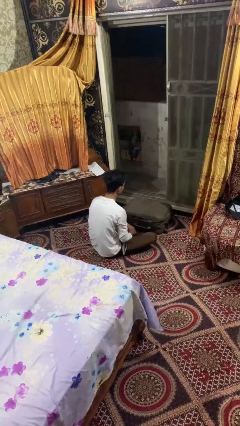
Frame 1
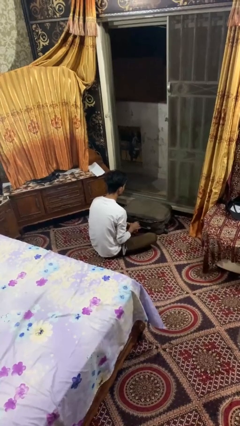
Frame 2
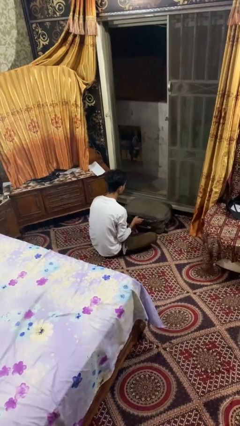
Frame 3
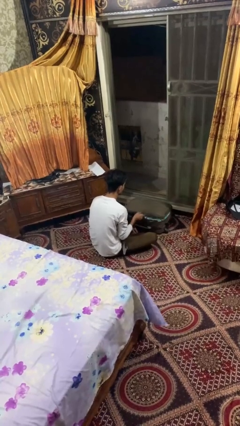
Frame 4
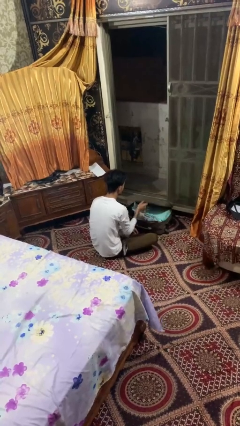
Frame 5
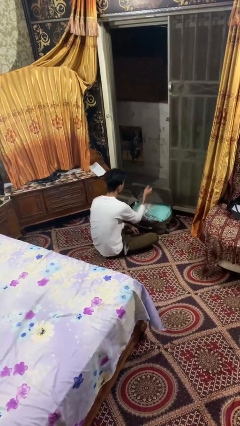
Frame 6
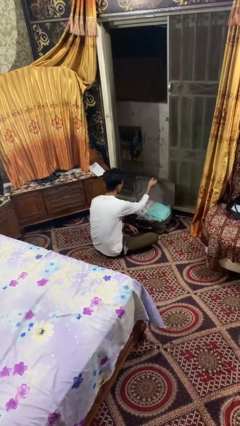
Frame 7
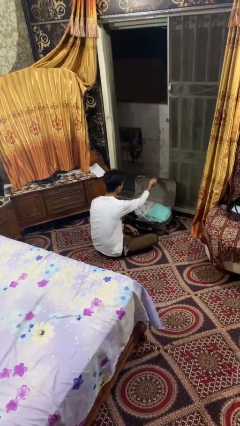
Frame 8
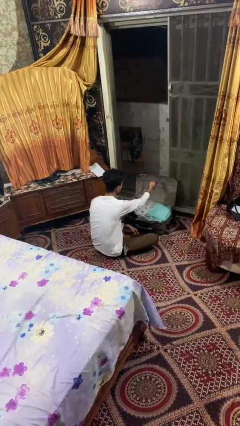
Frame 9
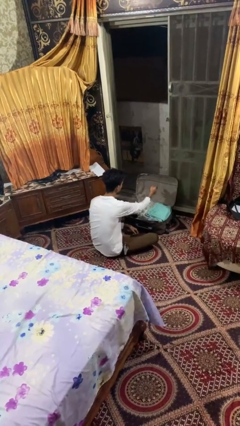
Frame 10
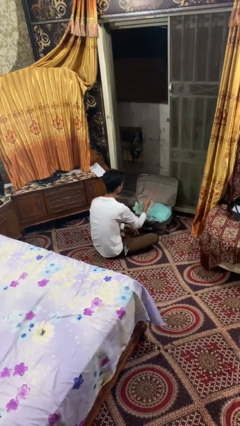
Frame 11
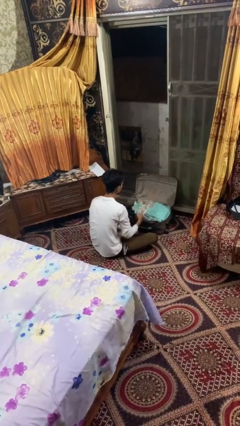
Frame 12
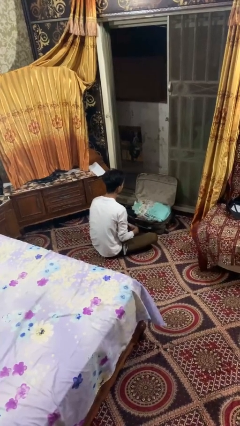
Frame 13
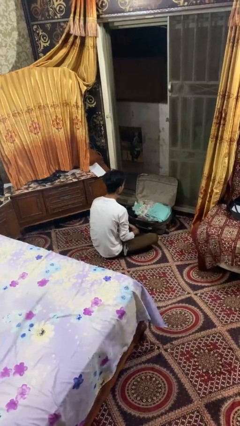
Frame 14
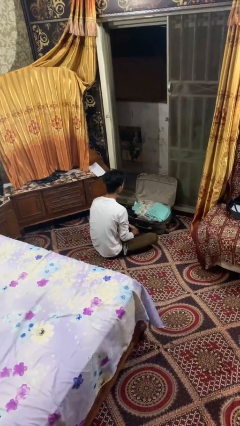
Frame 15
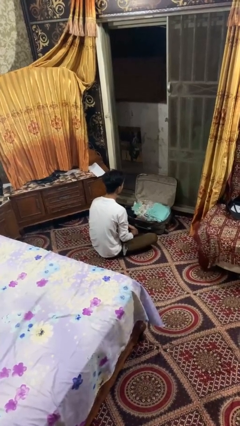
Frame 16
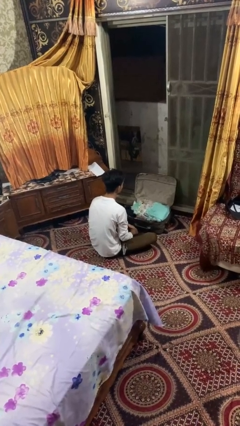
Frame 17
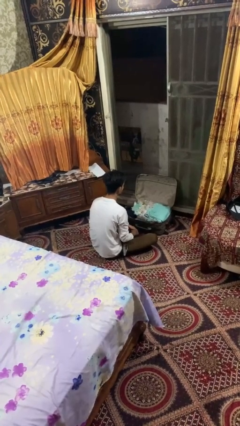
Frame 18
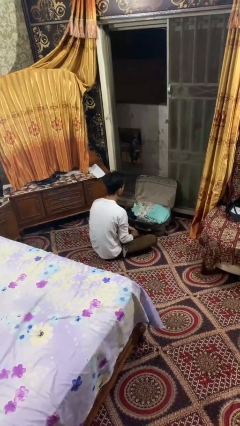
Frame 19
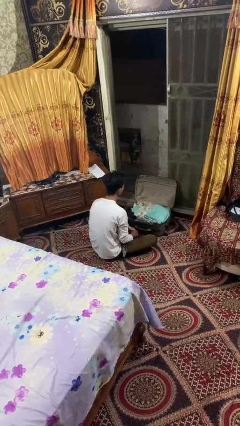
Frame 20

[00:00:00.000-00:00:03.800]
person opens suitcase

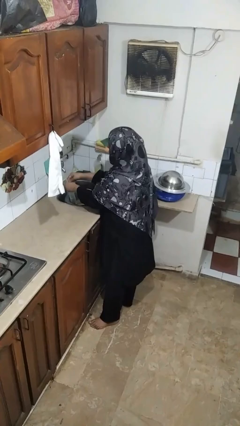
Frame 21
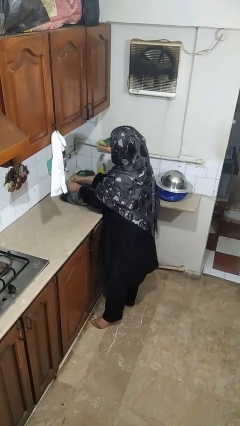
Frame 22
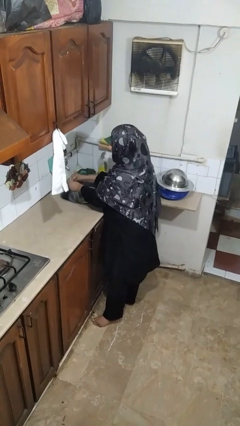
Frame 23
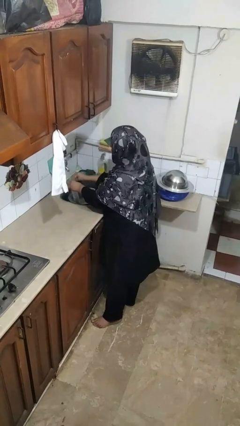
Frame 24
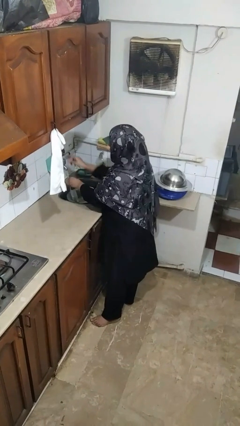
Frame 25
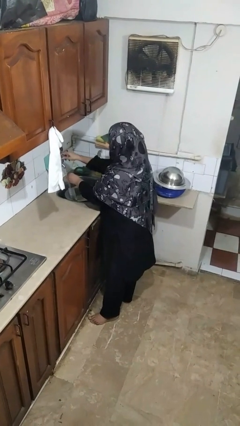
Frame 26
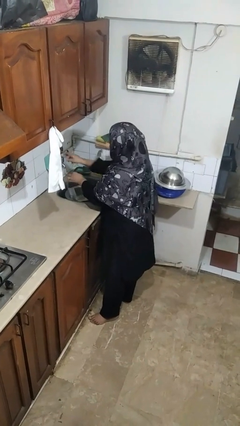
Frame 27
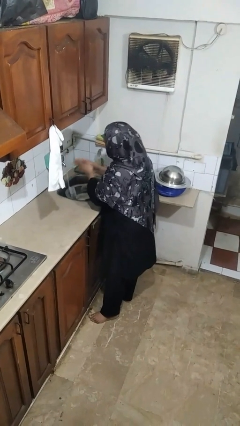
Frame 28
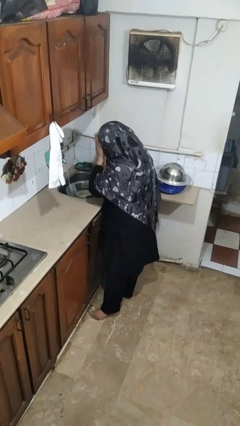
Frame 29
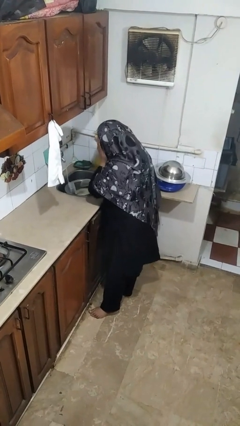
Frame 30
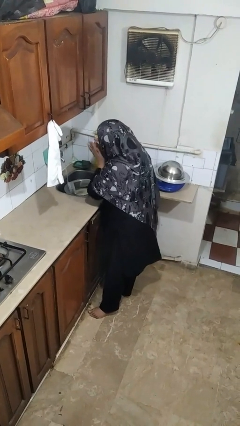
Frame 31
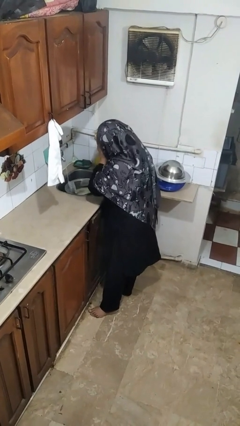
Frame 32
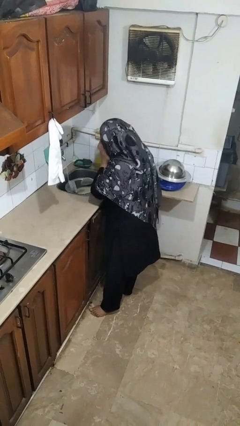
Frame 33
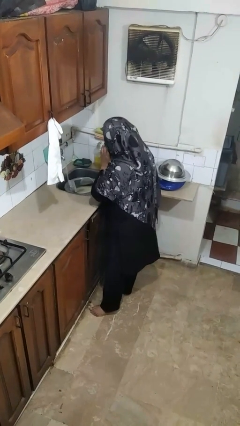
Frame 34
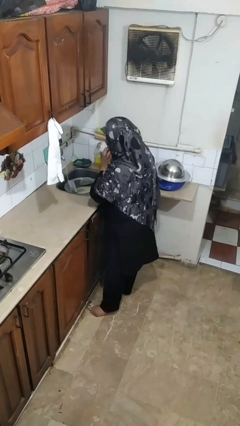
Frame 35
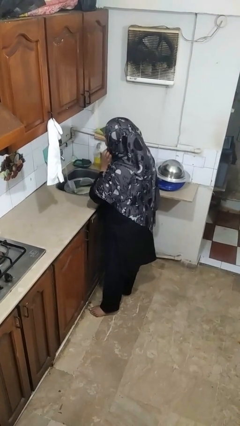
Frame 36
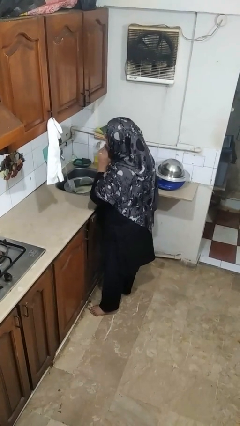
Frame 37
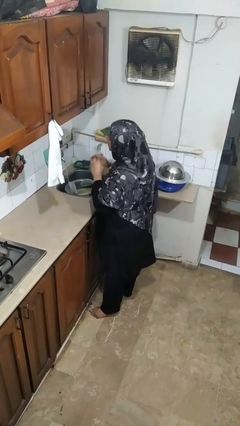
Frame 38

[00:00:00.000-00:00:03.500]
person washes face

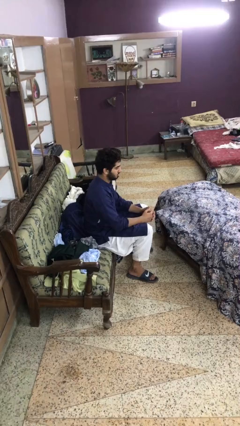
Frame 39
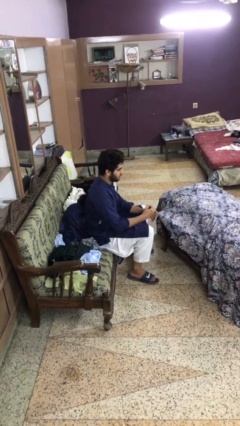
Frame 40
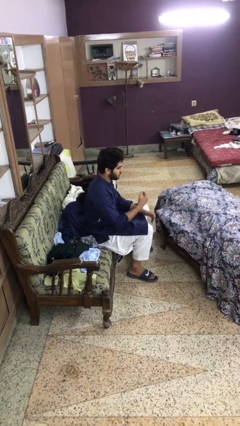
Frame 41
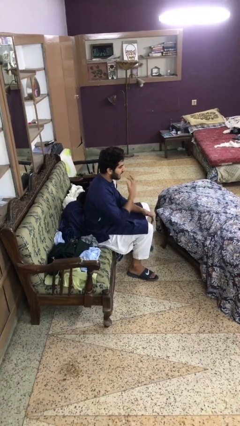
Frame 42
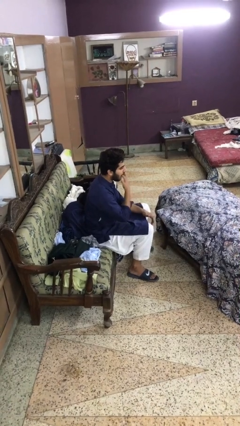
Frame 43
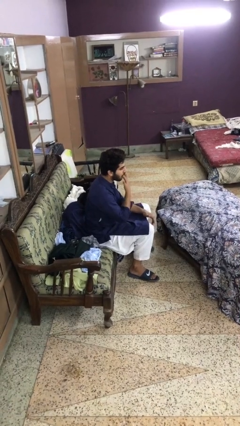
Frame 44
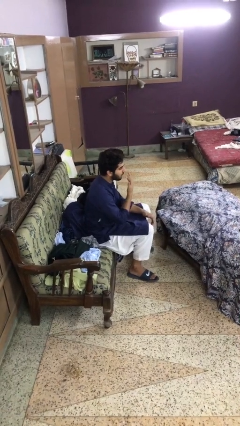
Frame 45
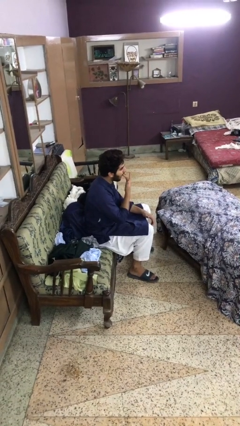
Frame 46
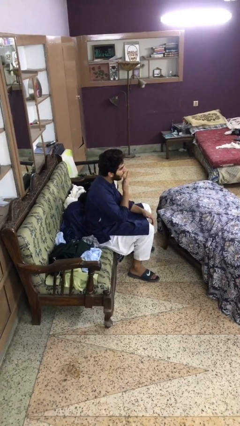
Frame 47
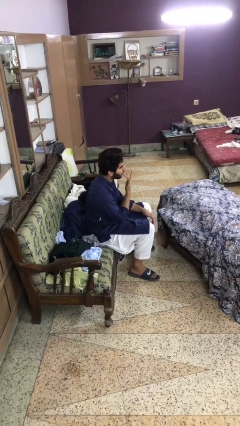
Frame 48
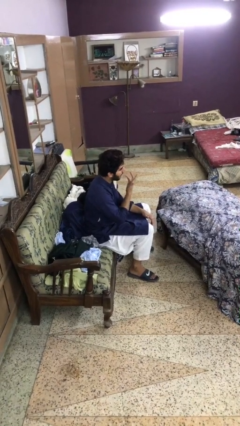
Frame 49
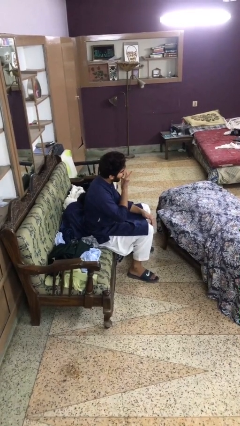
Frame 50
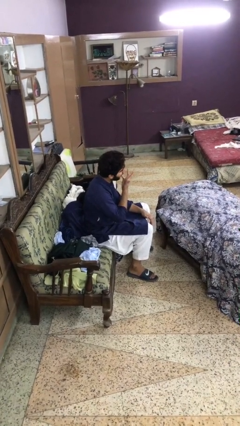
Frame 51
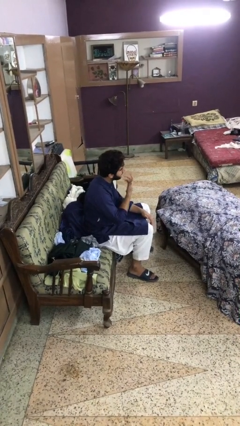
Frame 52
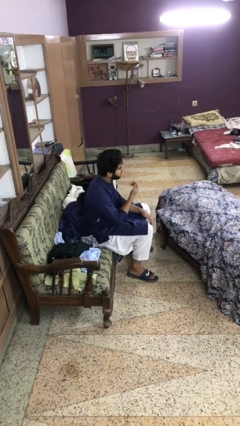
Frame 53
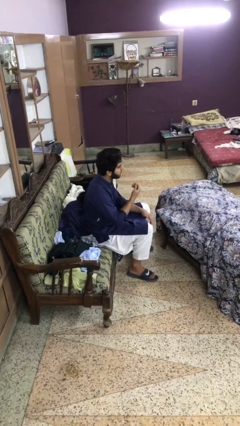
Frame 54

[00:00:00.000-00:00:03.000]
person licks fingers

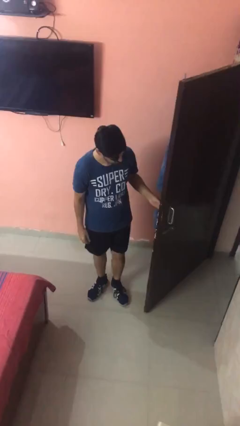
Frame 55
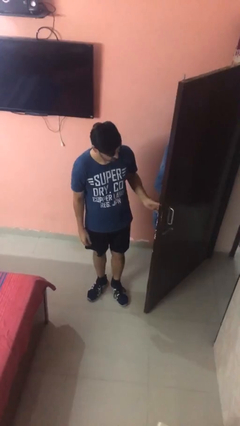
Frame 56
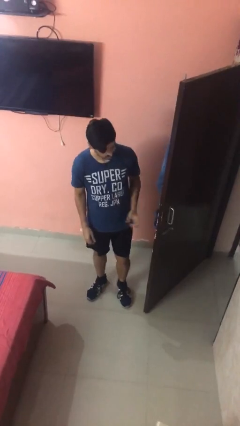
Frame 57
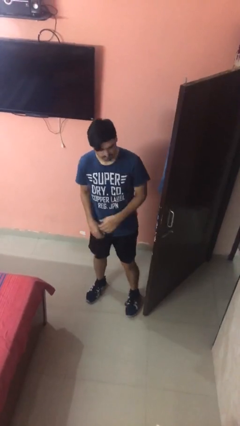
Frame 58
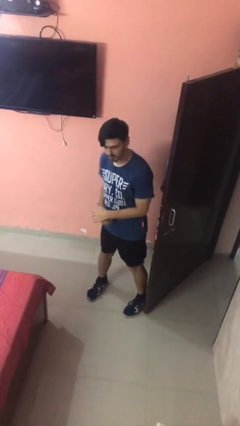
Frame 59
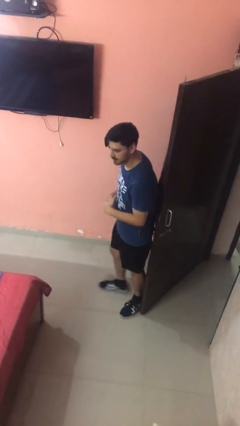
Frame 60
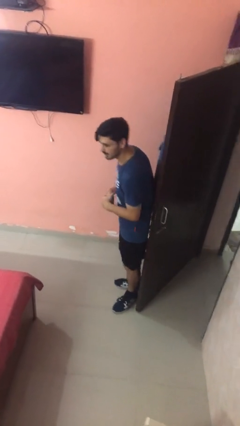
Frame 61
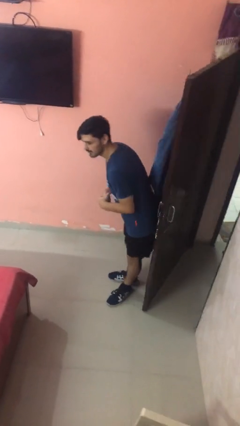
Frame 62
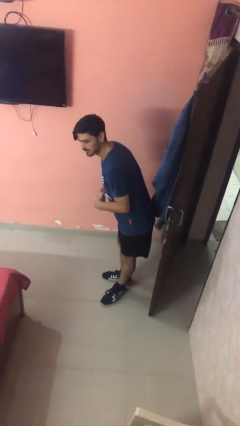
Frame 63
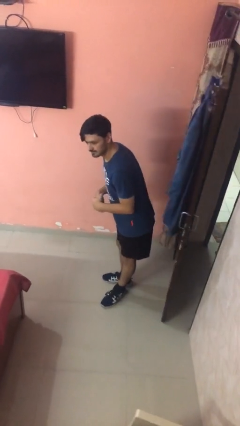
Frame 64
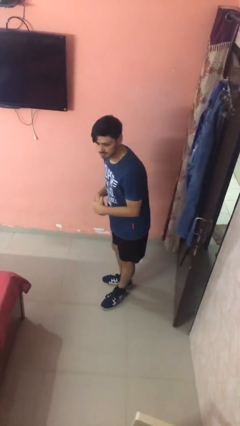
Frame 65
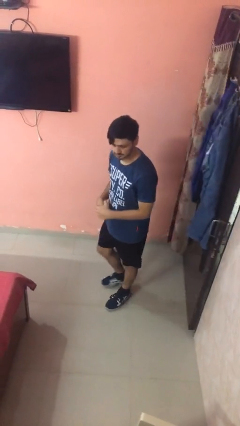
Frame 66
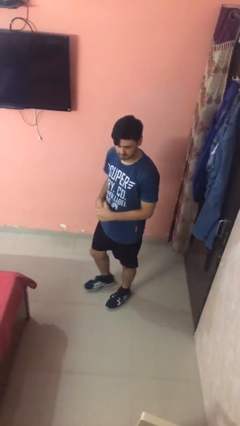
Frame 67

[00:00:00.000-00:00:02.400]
person closes door with hip

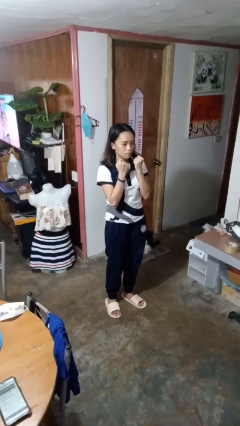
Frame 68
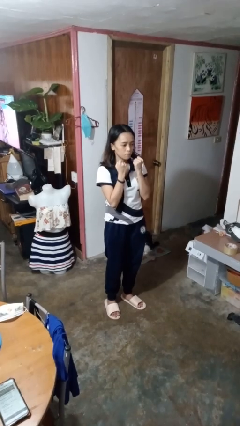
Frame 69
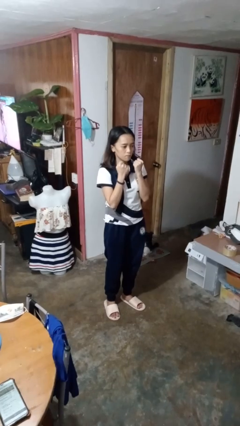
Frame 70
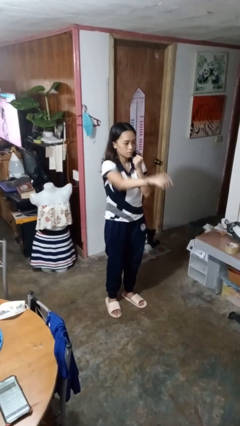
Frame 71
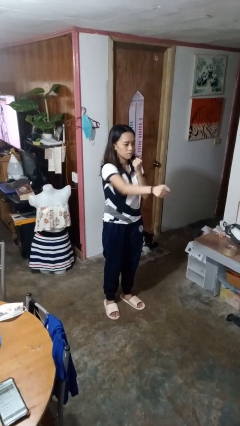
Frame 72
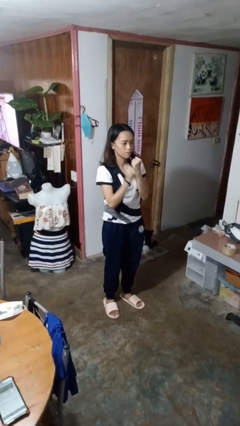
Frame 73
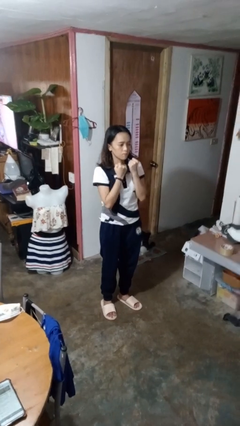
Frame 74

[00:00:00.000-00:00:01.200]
person punches

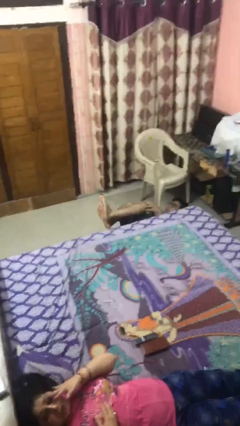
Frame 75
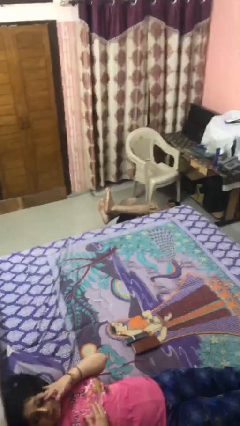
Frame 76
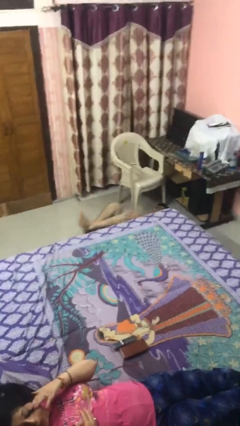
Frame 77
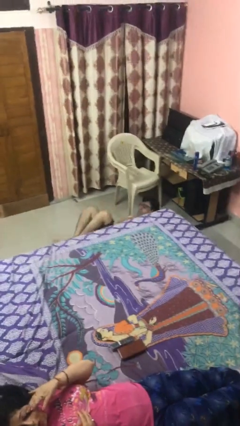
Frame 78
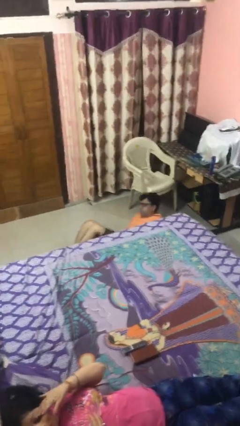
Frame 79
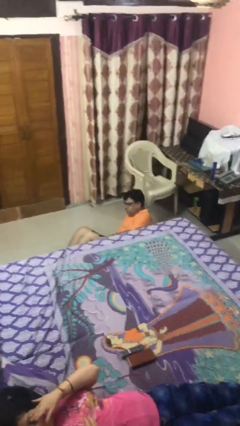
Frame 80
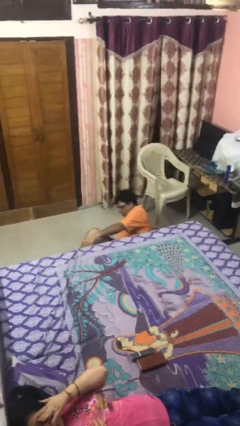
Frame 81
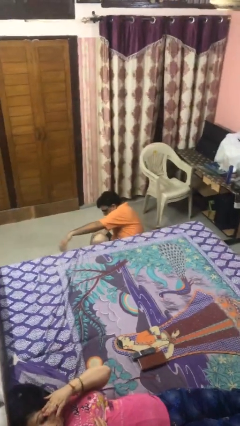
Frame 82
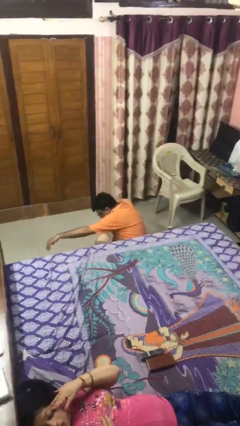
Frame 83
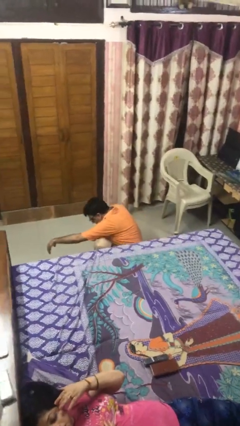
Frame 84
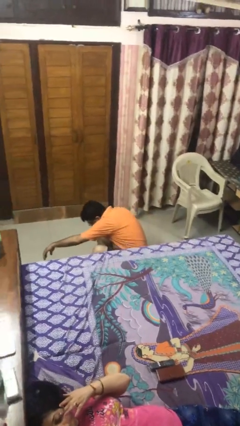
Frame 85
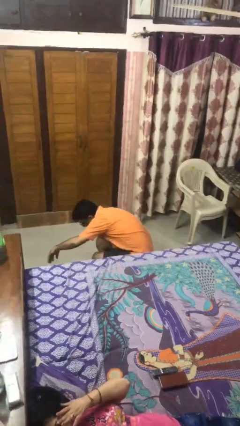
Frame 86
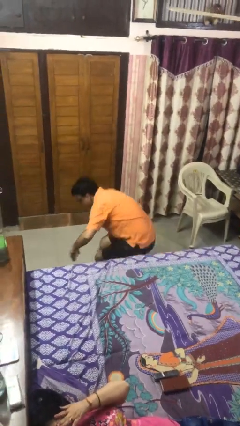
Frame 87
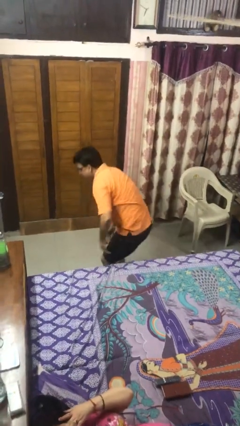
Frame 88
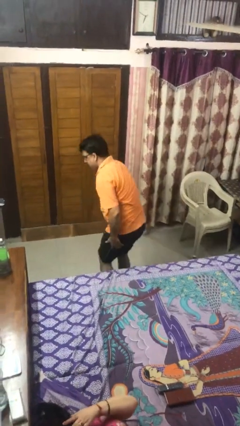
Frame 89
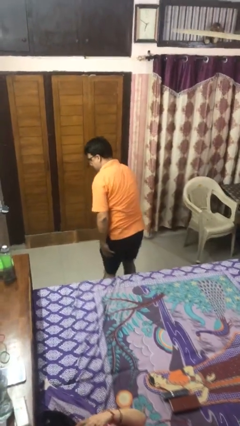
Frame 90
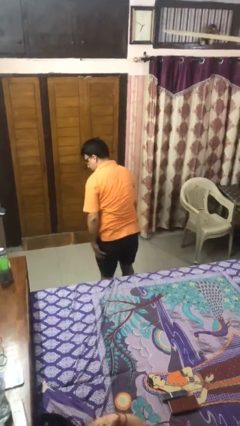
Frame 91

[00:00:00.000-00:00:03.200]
person stands up from floor

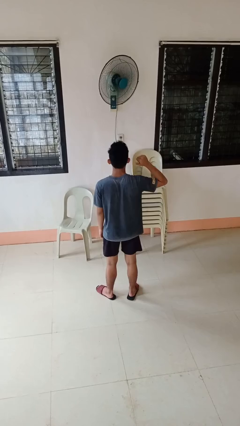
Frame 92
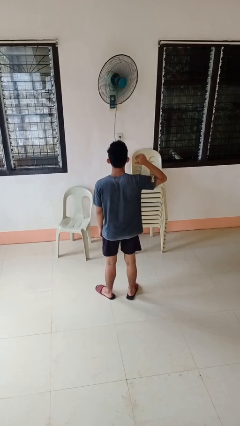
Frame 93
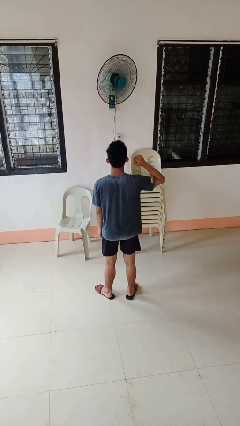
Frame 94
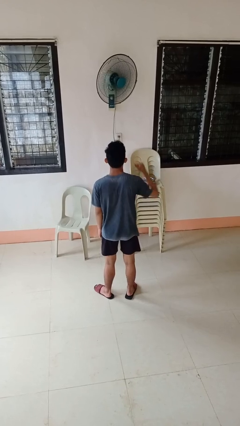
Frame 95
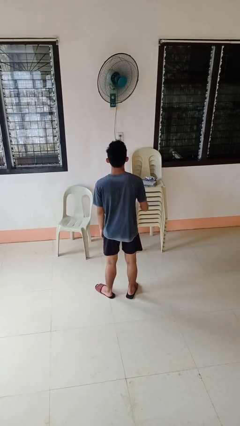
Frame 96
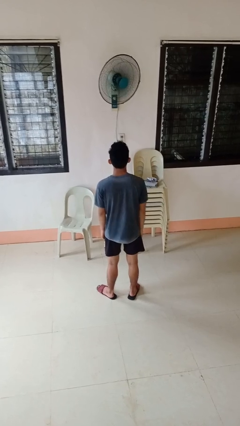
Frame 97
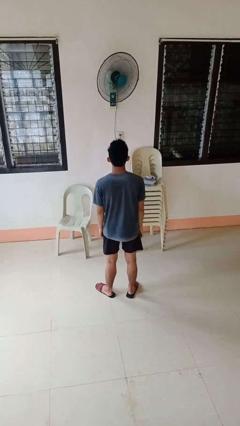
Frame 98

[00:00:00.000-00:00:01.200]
person gestures behind me
